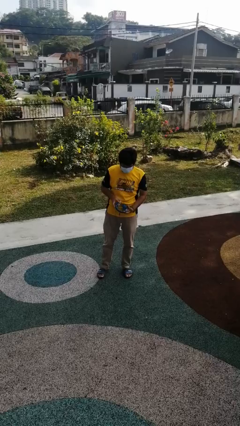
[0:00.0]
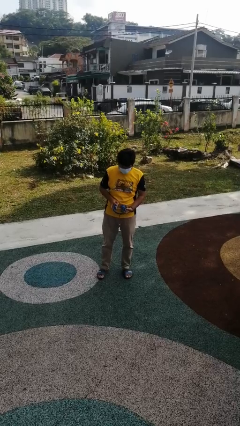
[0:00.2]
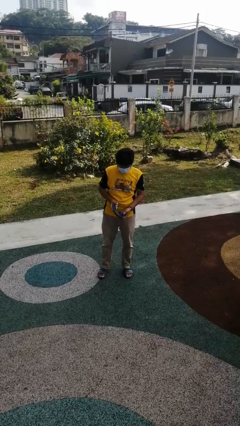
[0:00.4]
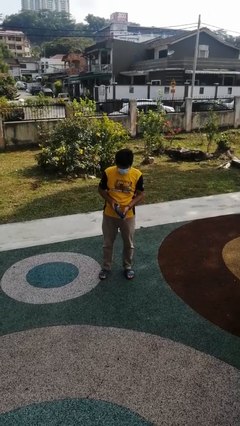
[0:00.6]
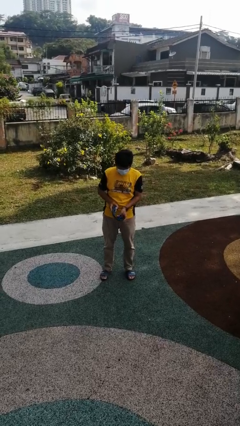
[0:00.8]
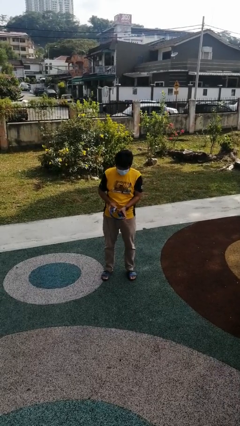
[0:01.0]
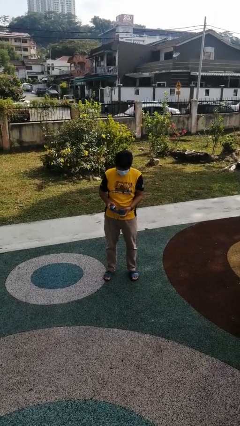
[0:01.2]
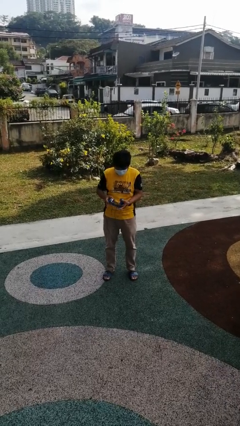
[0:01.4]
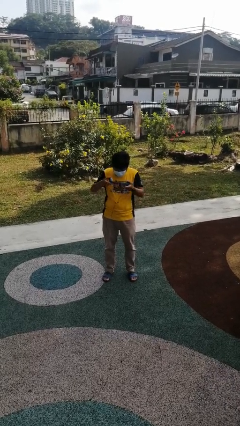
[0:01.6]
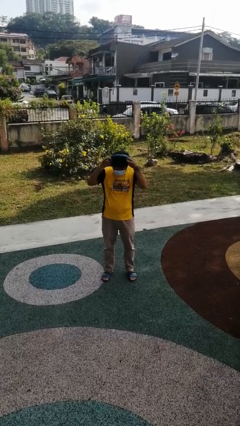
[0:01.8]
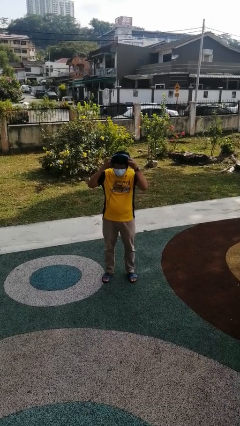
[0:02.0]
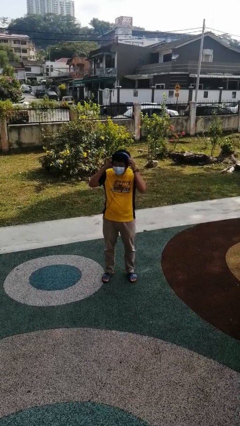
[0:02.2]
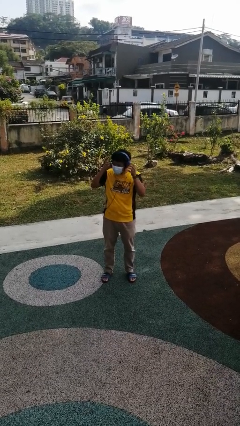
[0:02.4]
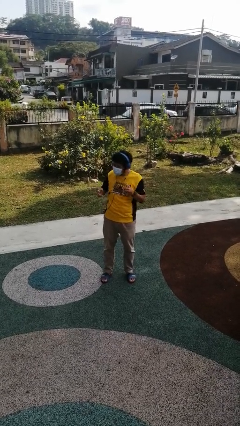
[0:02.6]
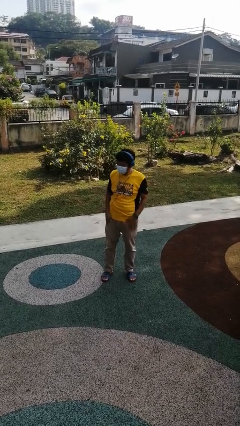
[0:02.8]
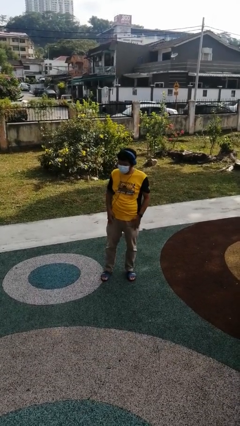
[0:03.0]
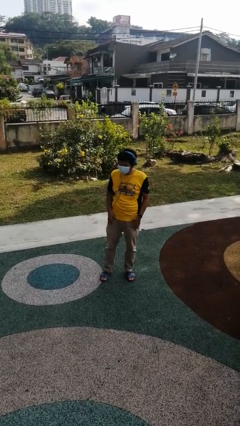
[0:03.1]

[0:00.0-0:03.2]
person puts on headphones

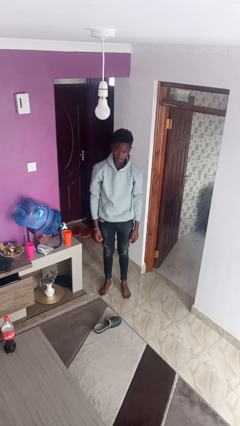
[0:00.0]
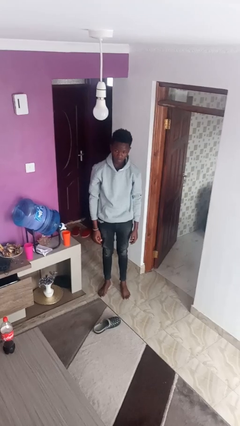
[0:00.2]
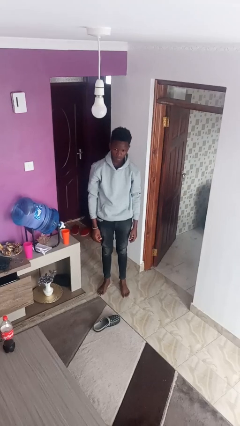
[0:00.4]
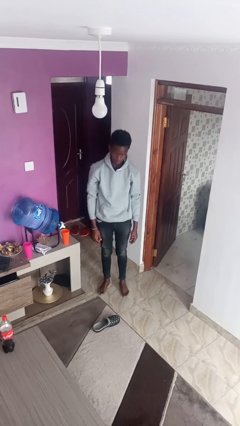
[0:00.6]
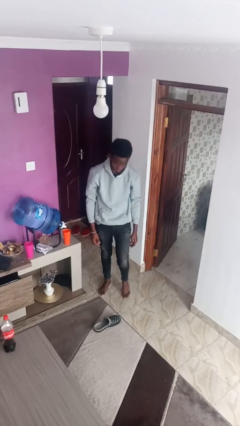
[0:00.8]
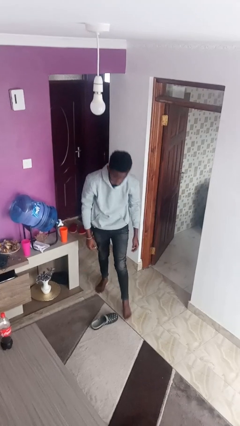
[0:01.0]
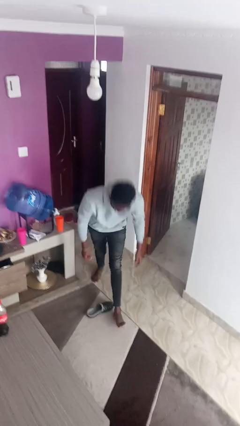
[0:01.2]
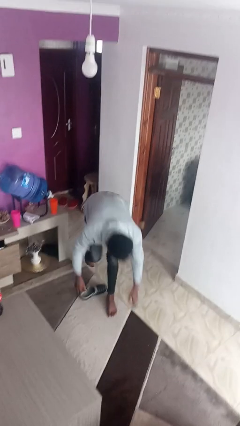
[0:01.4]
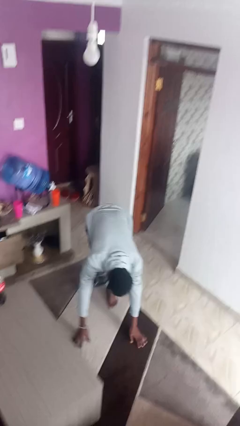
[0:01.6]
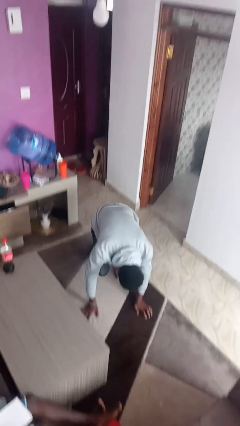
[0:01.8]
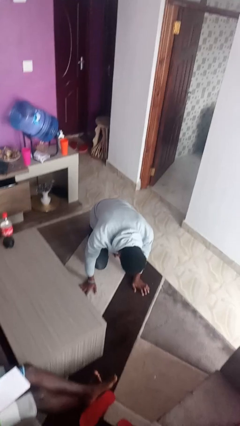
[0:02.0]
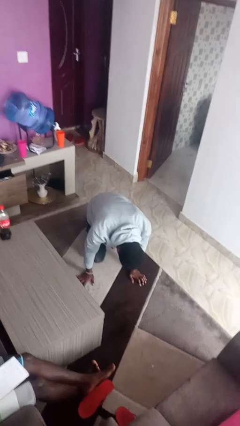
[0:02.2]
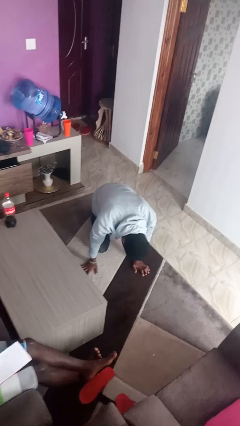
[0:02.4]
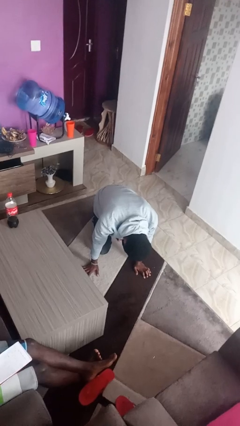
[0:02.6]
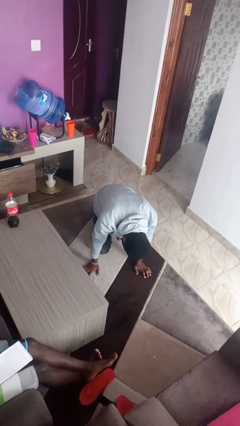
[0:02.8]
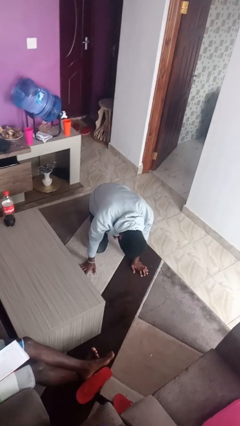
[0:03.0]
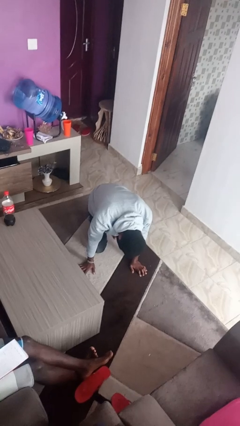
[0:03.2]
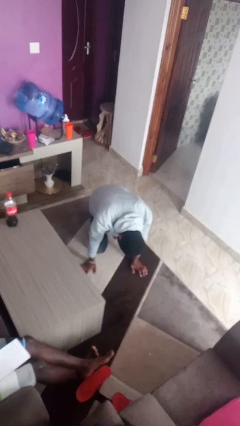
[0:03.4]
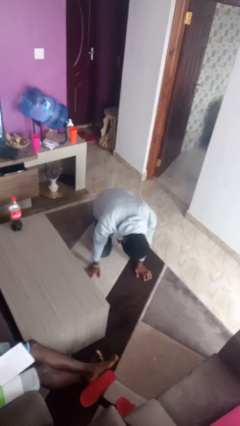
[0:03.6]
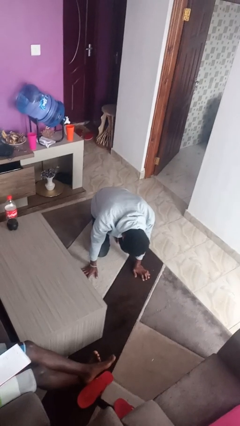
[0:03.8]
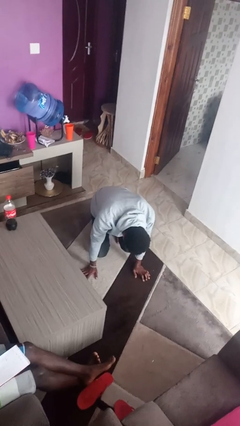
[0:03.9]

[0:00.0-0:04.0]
person trips on object on floor

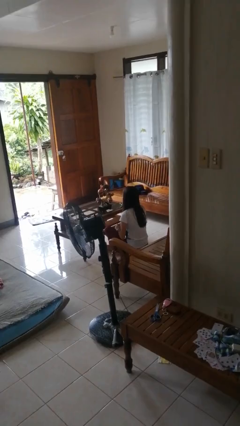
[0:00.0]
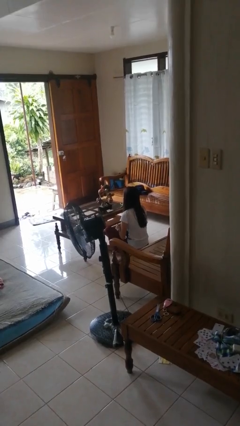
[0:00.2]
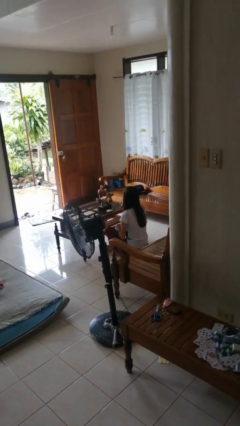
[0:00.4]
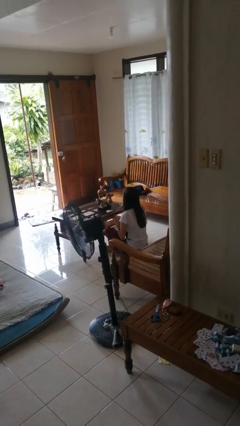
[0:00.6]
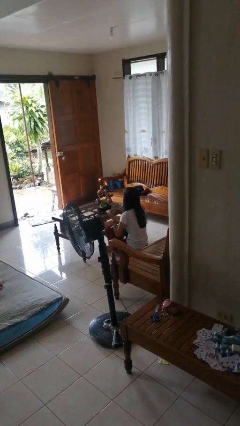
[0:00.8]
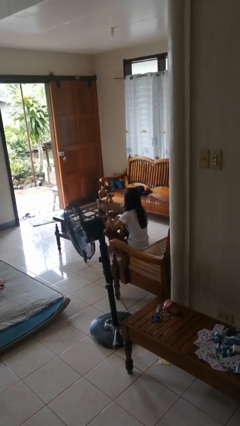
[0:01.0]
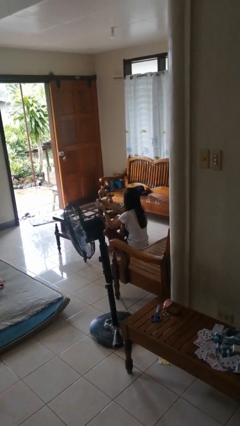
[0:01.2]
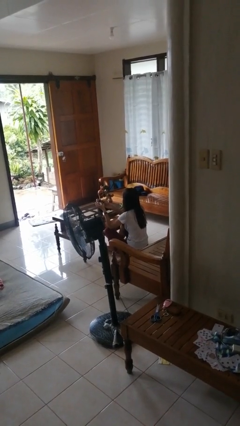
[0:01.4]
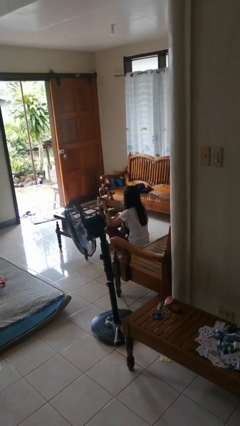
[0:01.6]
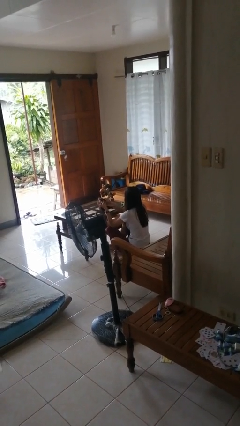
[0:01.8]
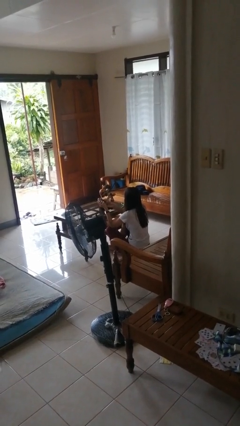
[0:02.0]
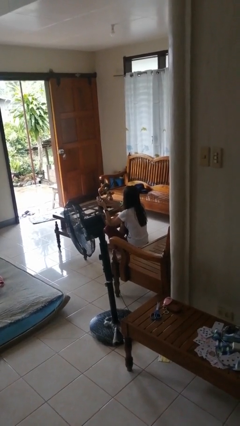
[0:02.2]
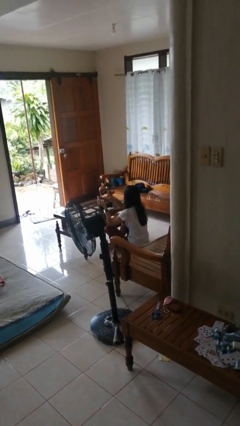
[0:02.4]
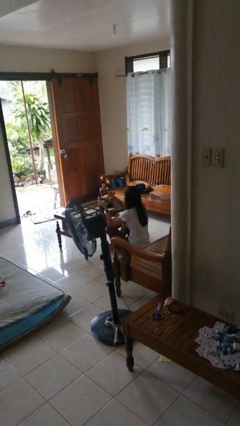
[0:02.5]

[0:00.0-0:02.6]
person arranges flowers in vase

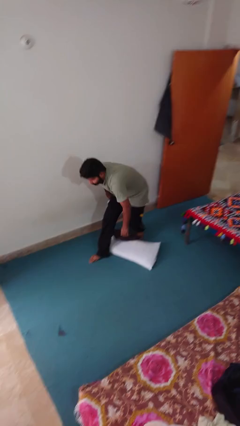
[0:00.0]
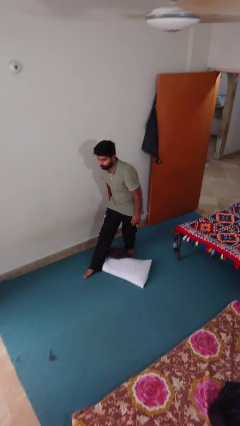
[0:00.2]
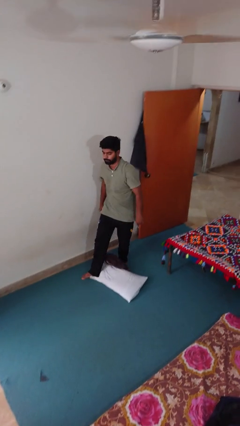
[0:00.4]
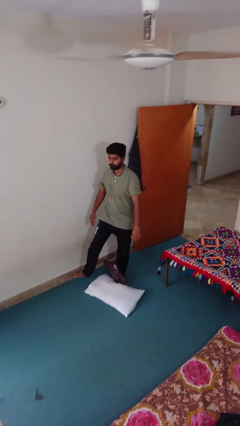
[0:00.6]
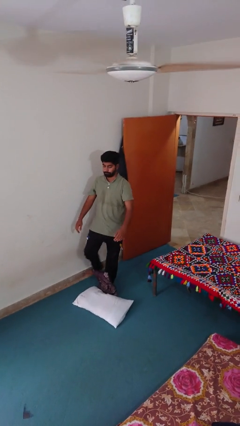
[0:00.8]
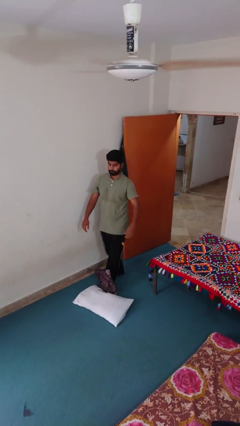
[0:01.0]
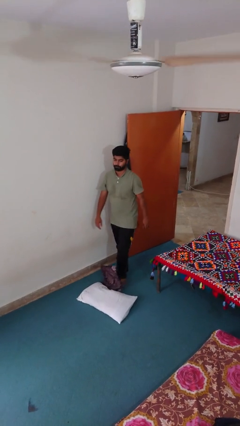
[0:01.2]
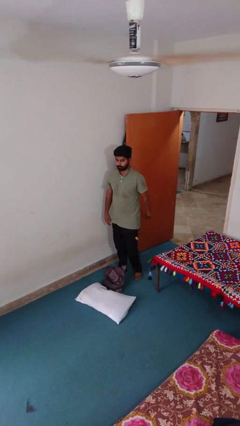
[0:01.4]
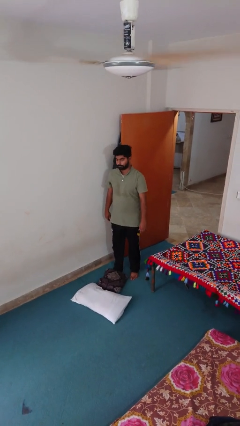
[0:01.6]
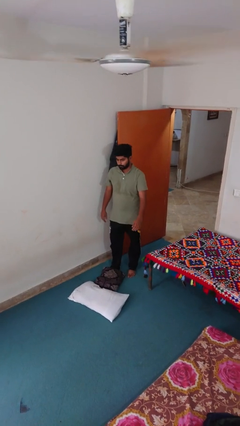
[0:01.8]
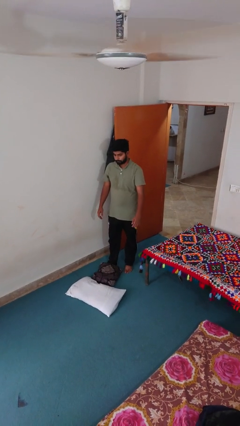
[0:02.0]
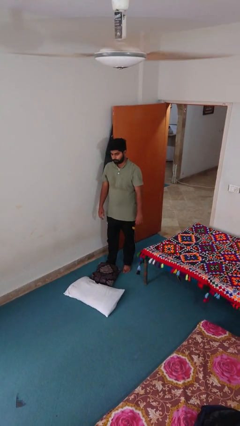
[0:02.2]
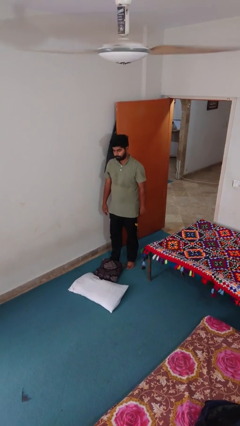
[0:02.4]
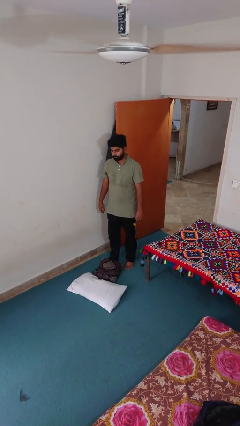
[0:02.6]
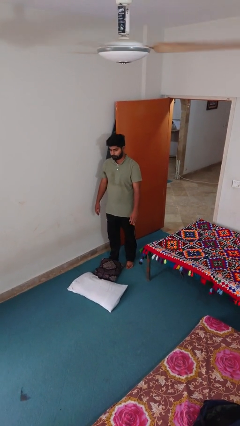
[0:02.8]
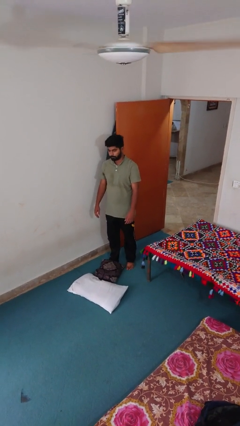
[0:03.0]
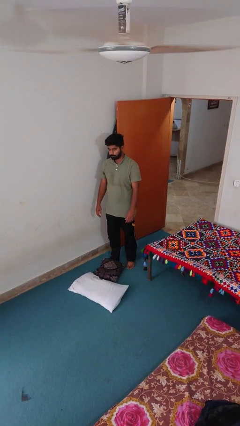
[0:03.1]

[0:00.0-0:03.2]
person stands up from floor

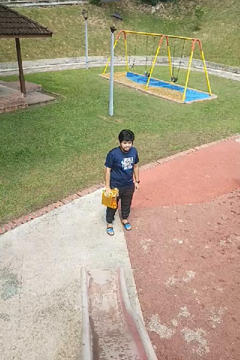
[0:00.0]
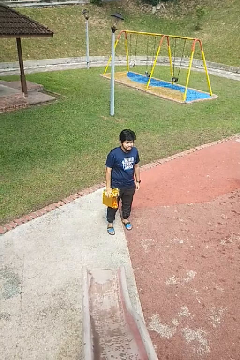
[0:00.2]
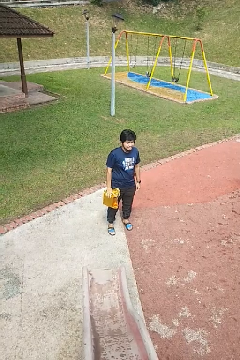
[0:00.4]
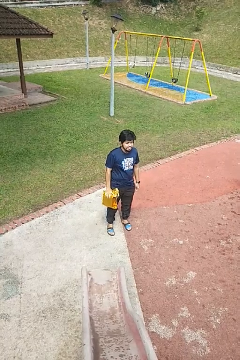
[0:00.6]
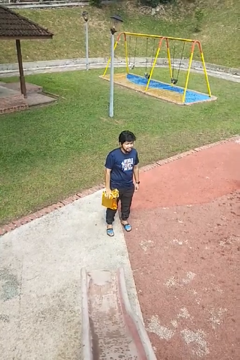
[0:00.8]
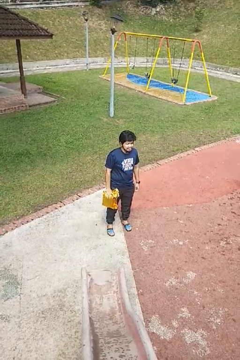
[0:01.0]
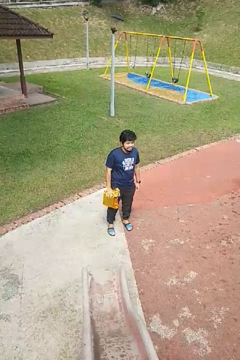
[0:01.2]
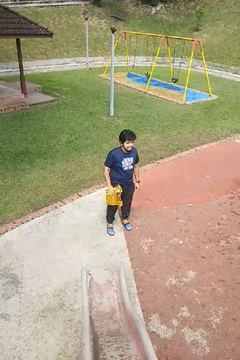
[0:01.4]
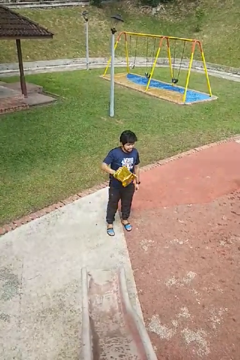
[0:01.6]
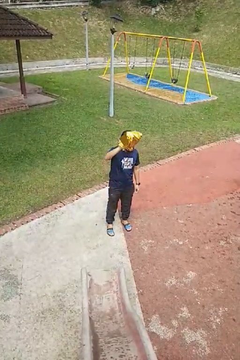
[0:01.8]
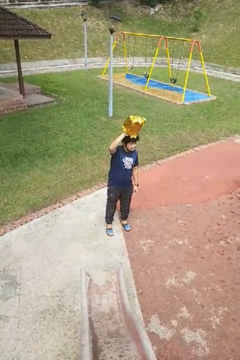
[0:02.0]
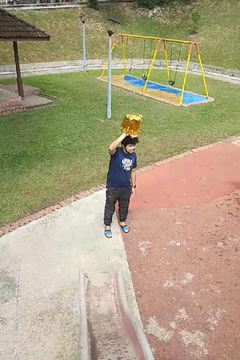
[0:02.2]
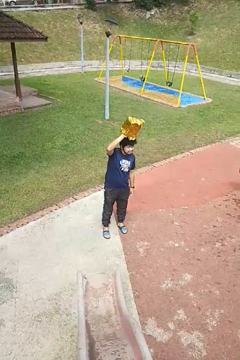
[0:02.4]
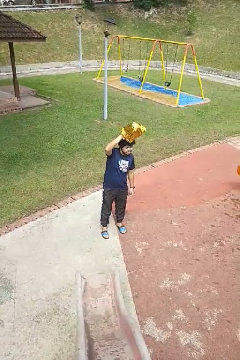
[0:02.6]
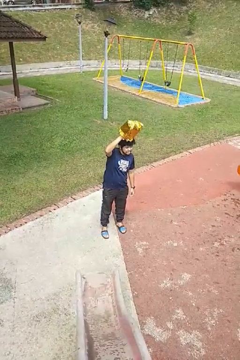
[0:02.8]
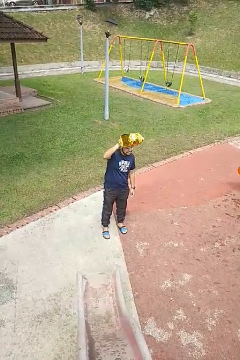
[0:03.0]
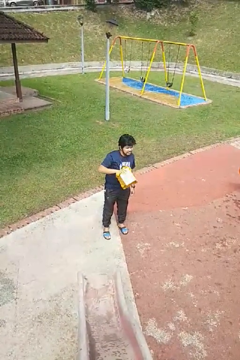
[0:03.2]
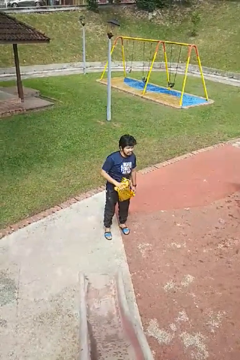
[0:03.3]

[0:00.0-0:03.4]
person holds object above head

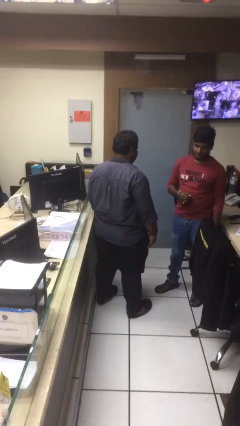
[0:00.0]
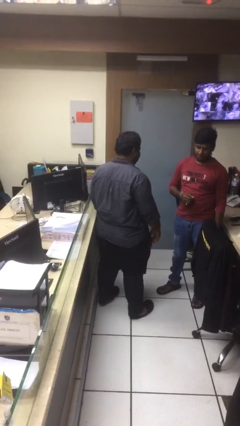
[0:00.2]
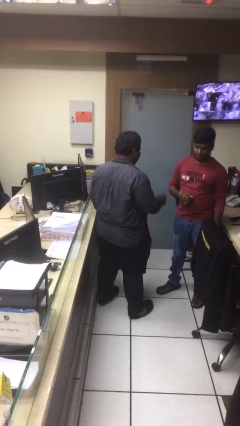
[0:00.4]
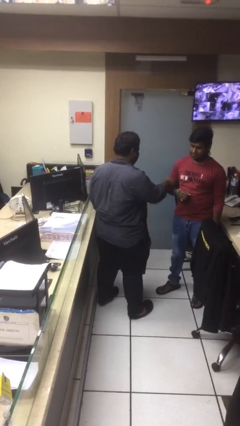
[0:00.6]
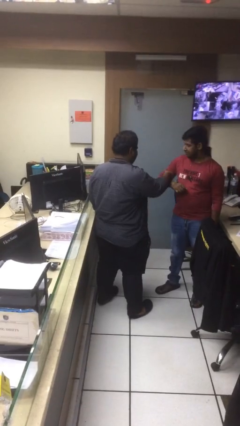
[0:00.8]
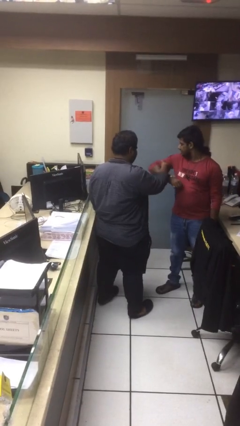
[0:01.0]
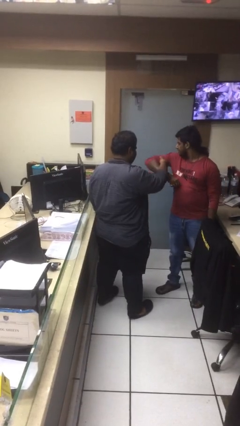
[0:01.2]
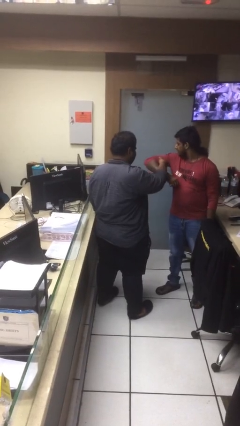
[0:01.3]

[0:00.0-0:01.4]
person grabs person by bicep
